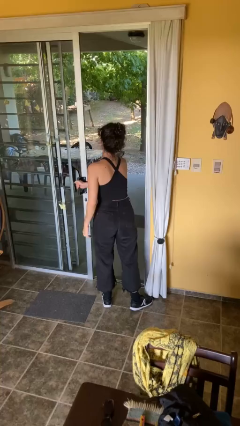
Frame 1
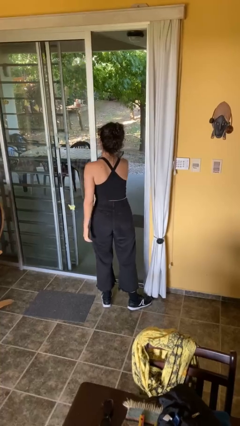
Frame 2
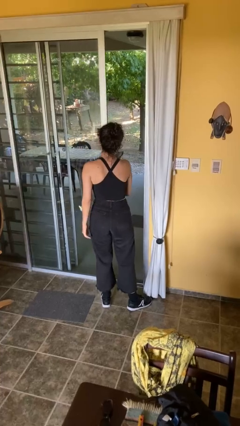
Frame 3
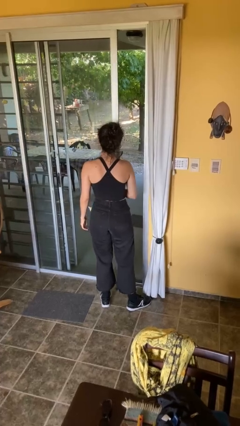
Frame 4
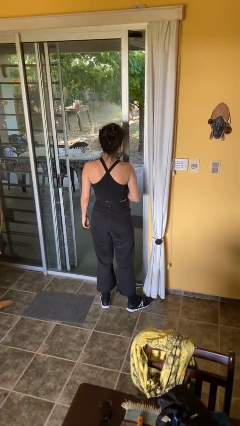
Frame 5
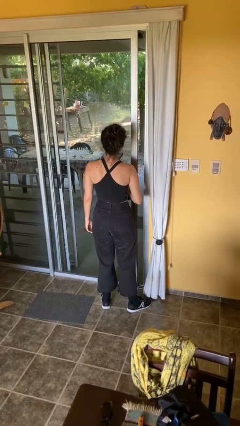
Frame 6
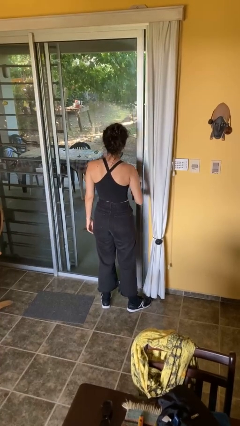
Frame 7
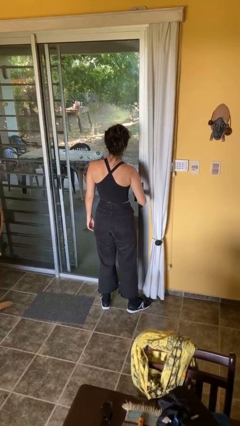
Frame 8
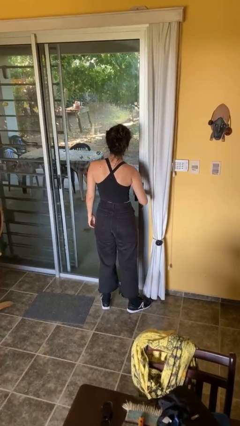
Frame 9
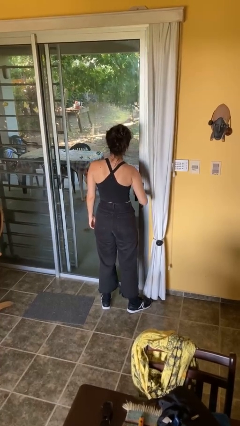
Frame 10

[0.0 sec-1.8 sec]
person closes facility door

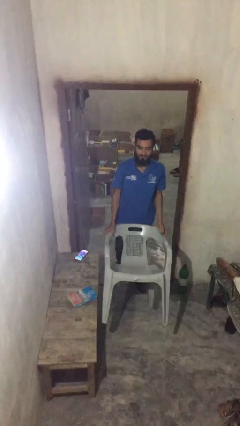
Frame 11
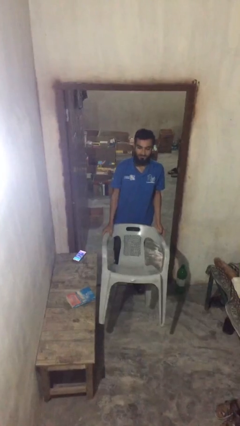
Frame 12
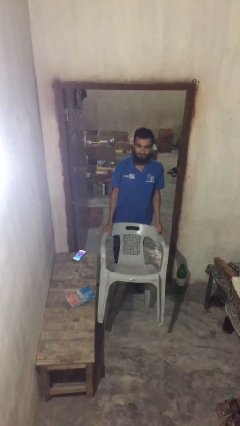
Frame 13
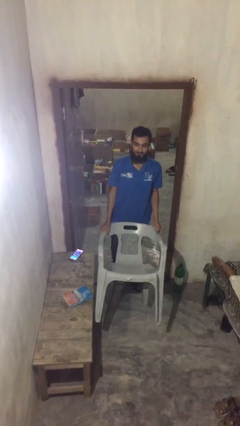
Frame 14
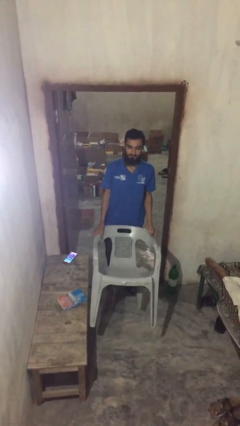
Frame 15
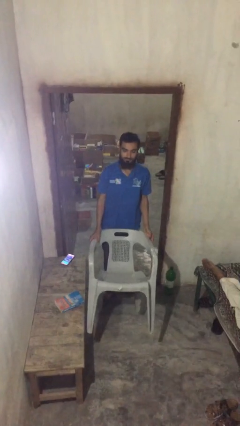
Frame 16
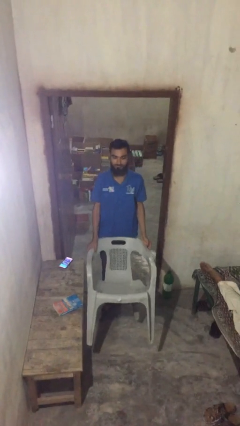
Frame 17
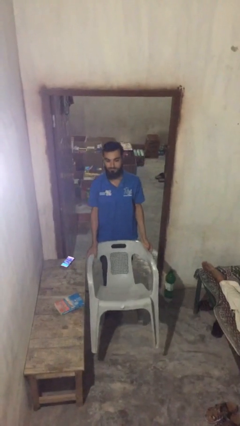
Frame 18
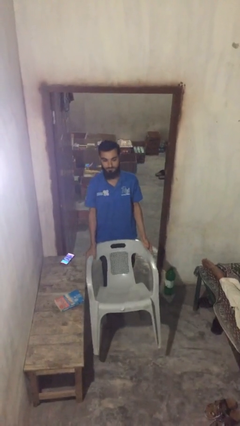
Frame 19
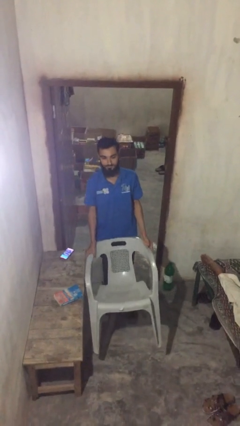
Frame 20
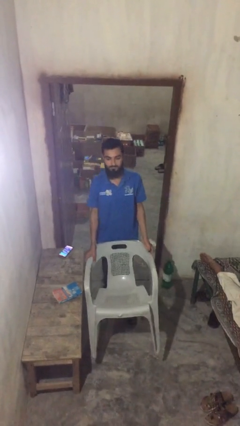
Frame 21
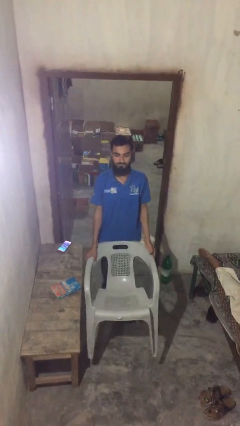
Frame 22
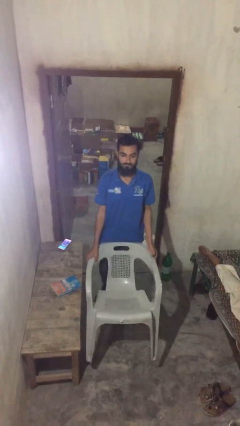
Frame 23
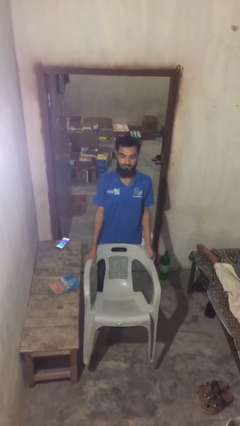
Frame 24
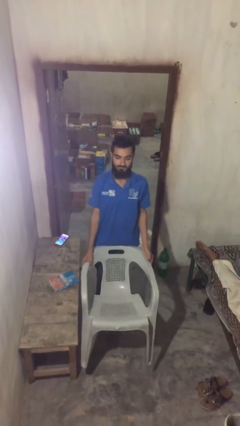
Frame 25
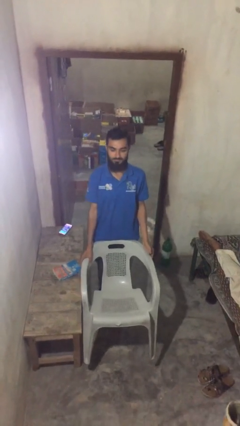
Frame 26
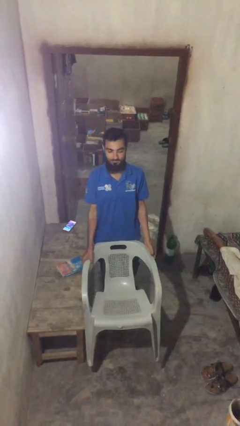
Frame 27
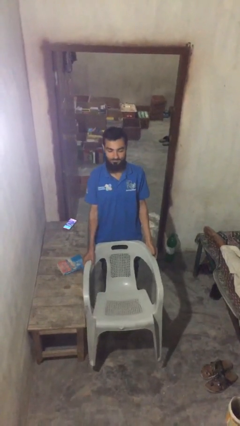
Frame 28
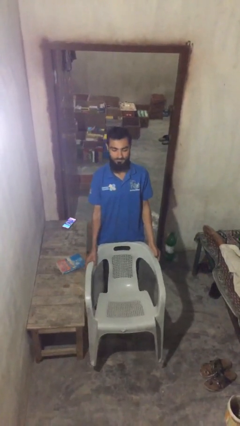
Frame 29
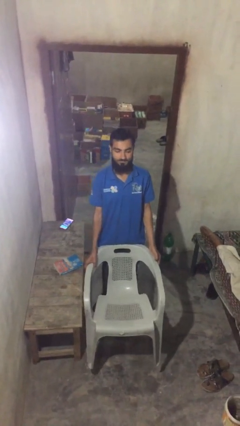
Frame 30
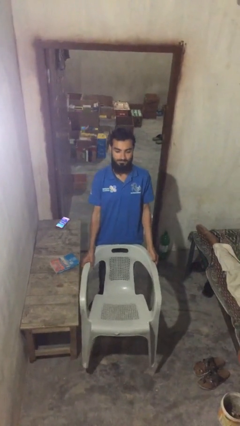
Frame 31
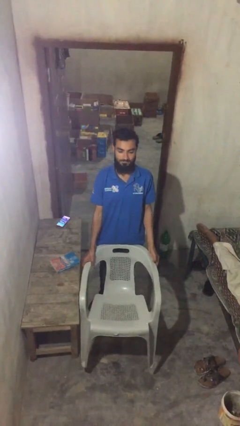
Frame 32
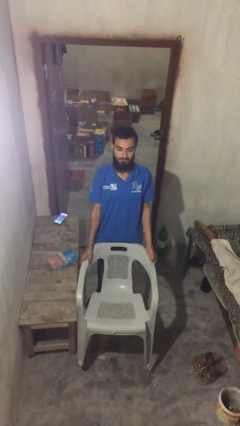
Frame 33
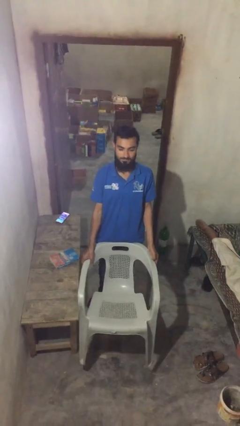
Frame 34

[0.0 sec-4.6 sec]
person carries heavy object

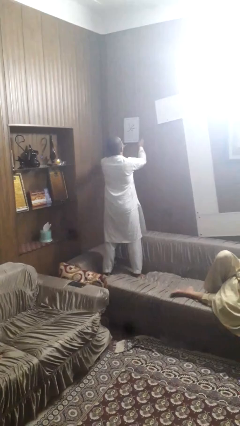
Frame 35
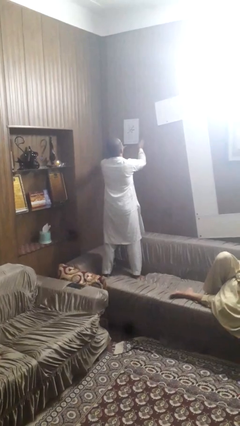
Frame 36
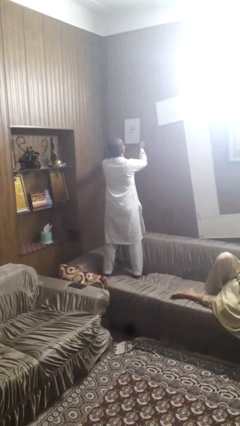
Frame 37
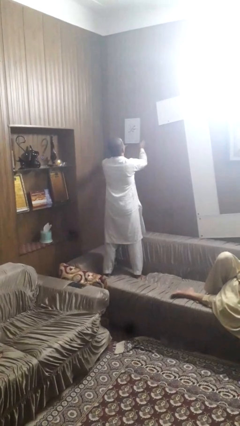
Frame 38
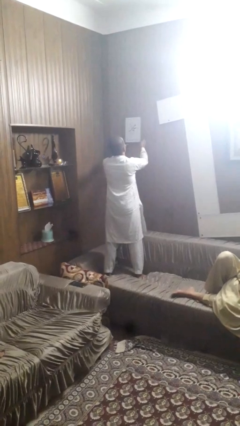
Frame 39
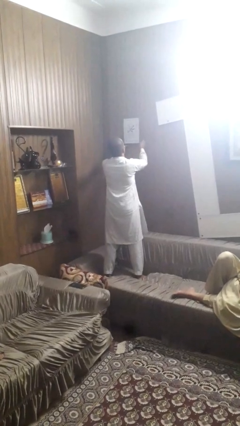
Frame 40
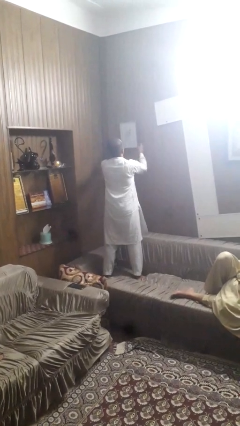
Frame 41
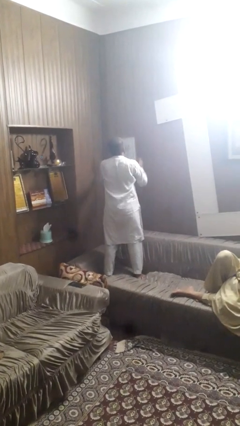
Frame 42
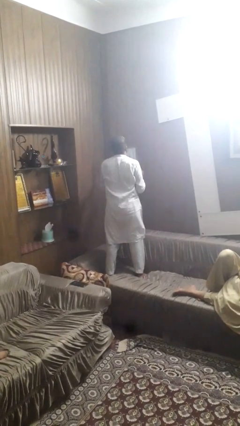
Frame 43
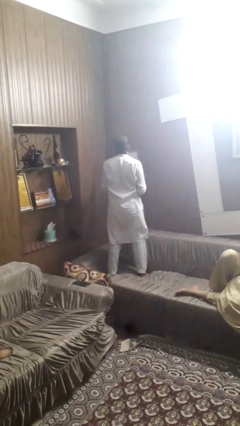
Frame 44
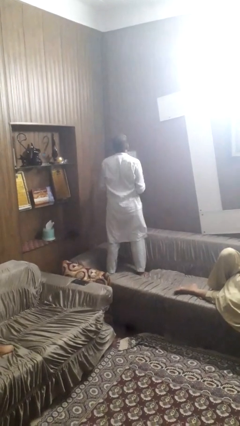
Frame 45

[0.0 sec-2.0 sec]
person takes down picture frame

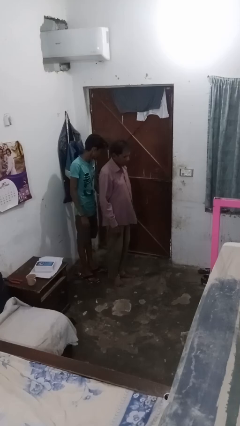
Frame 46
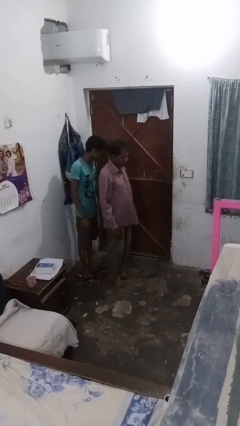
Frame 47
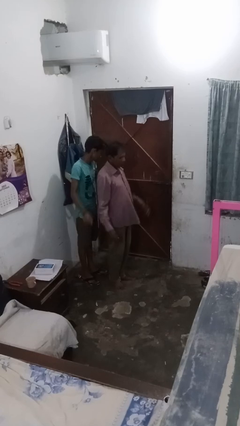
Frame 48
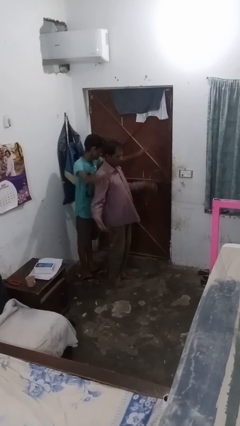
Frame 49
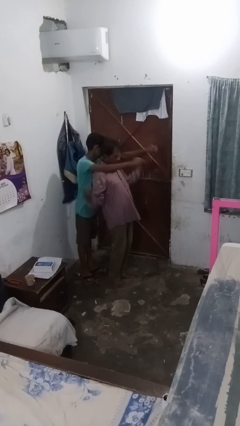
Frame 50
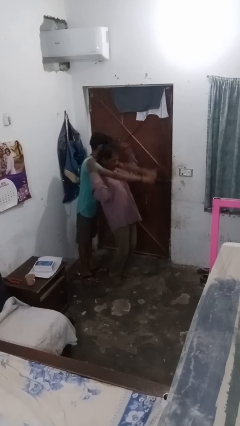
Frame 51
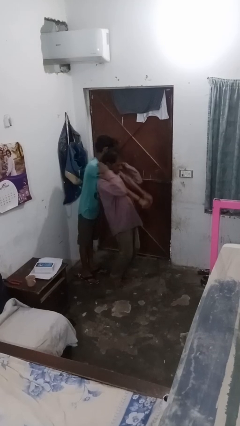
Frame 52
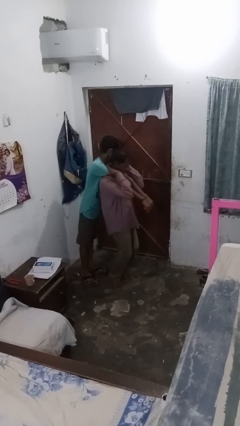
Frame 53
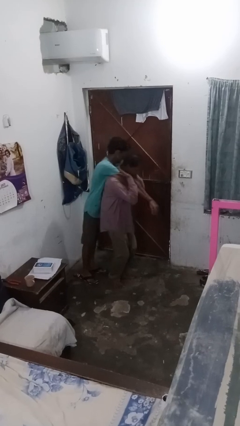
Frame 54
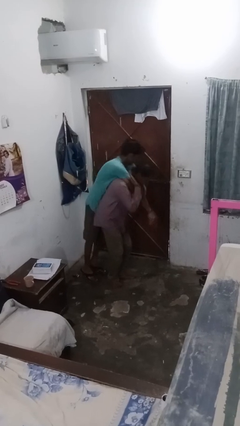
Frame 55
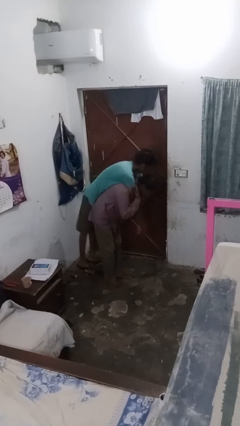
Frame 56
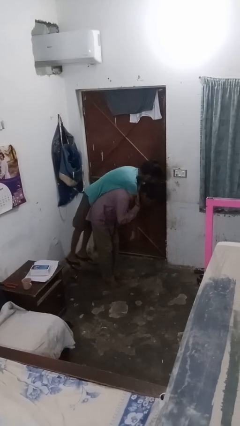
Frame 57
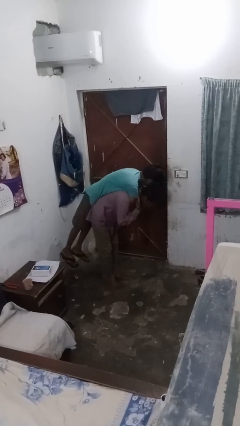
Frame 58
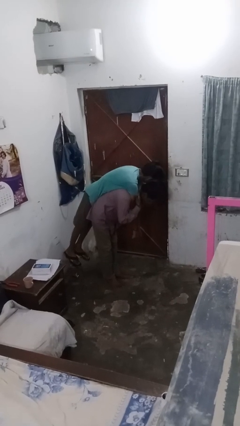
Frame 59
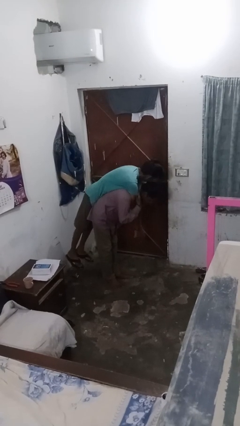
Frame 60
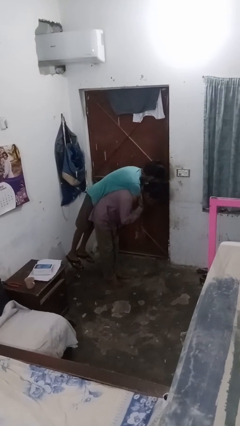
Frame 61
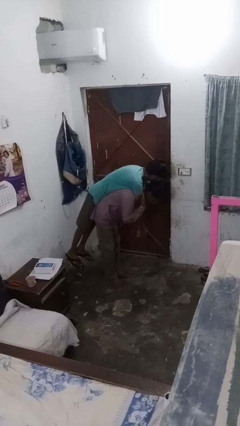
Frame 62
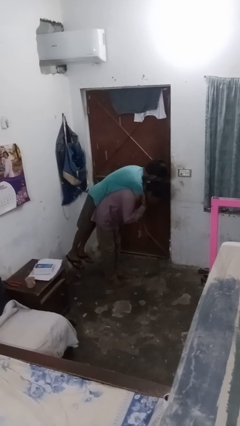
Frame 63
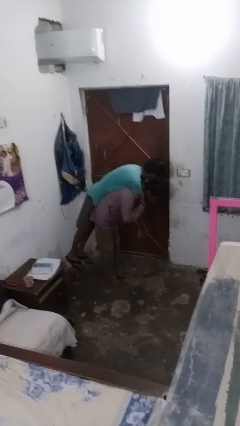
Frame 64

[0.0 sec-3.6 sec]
person carries person on shoulders

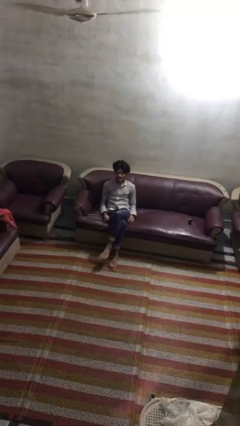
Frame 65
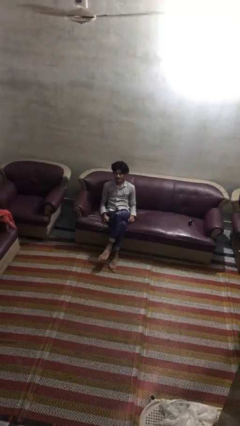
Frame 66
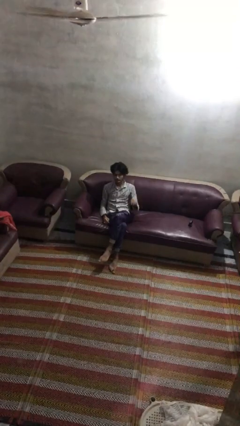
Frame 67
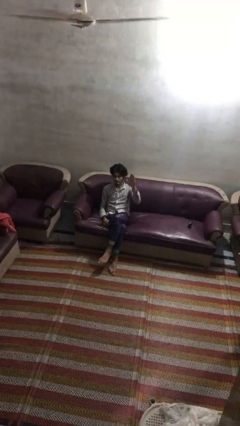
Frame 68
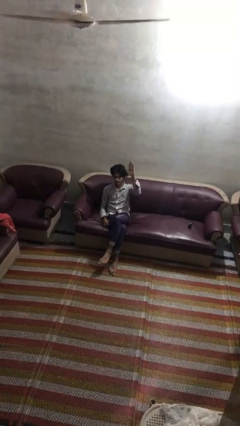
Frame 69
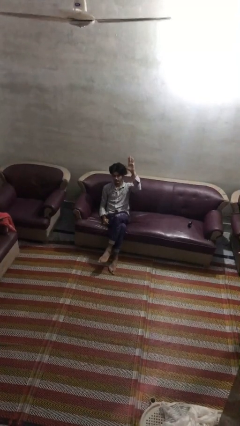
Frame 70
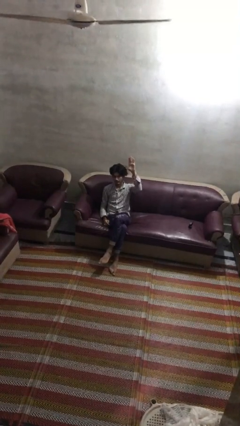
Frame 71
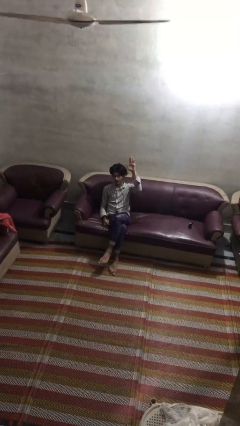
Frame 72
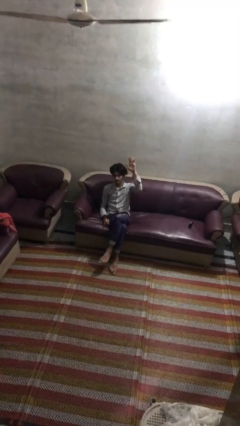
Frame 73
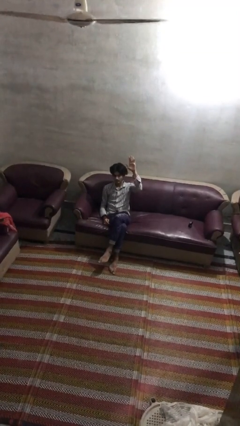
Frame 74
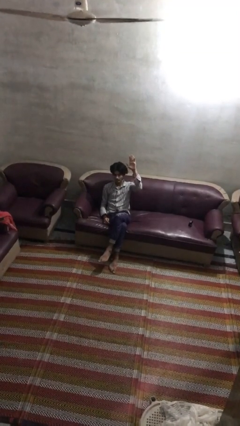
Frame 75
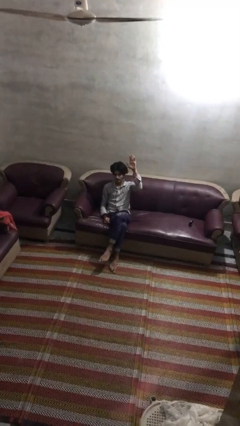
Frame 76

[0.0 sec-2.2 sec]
person gestures raise hand

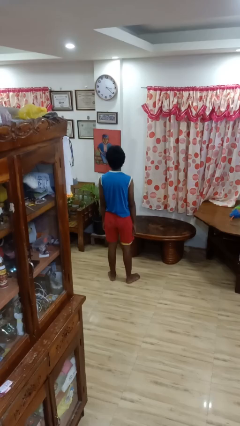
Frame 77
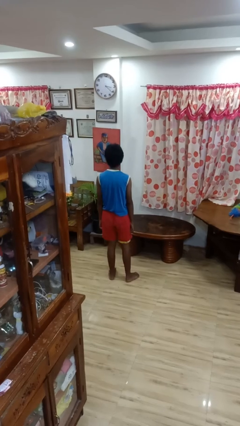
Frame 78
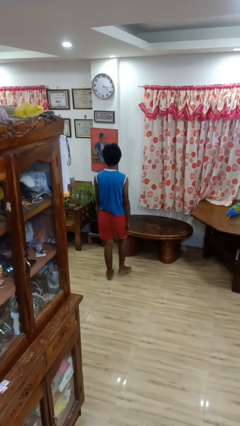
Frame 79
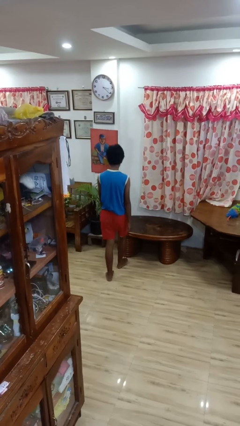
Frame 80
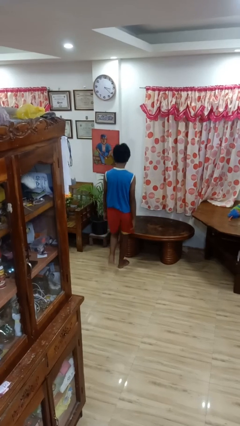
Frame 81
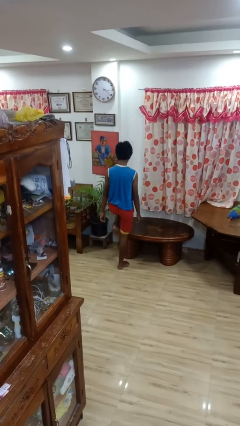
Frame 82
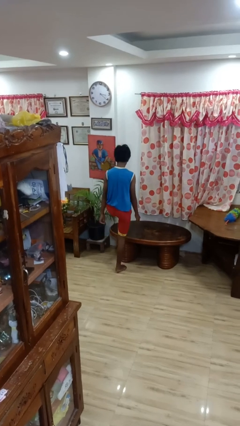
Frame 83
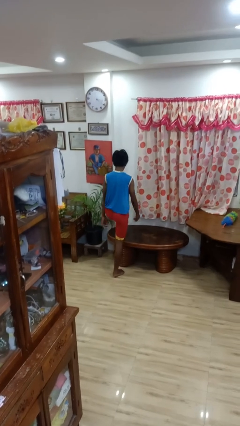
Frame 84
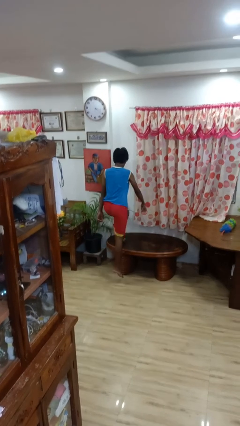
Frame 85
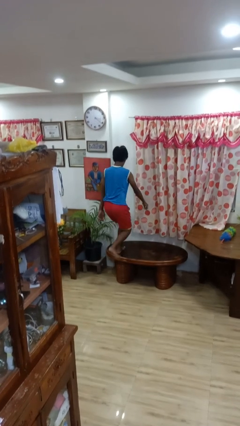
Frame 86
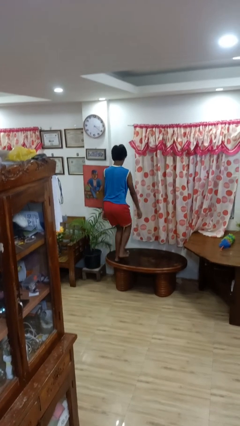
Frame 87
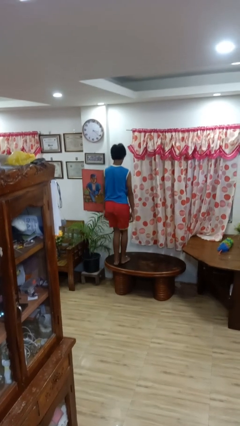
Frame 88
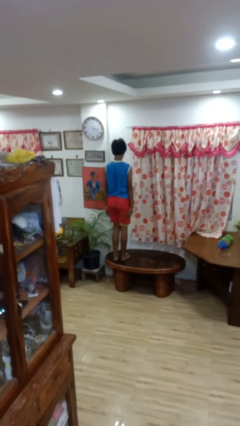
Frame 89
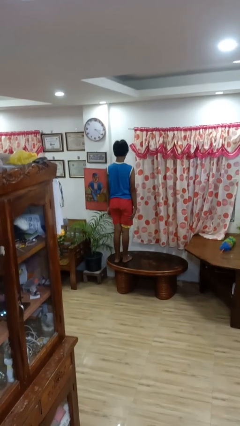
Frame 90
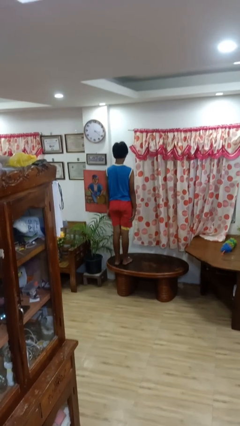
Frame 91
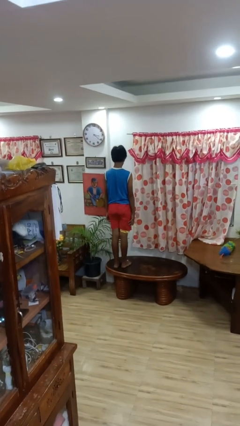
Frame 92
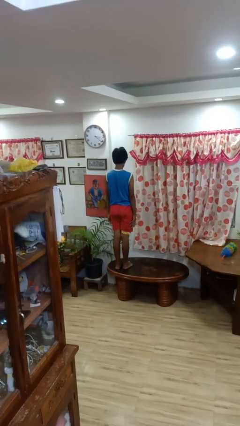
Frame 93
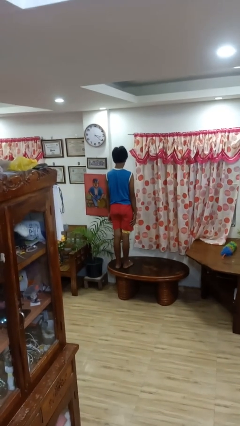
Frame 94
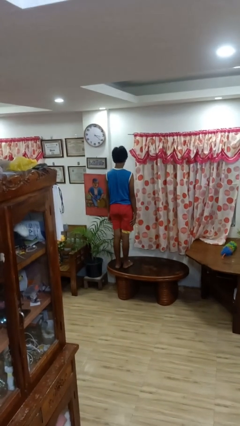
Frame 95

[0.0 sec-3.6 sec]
person climbs on table
